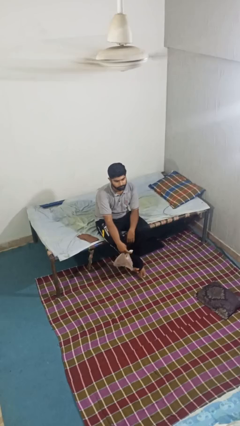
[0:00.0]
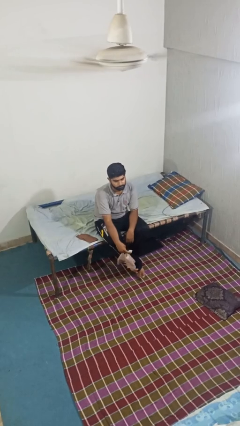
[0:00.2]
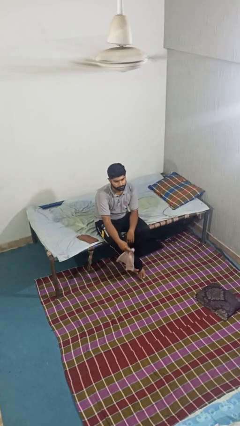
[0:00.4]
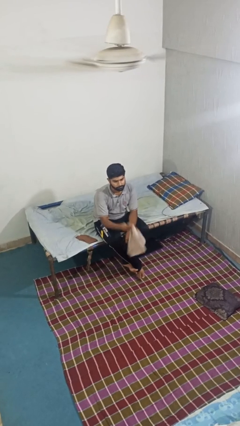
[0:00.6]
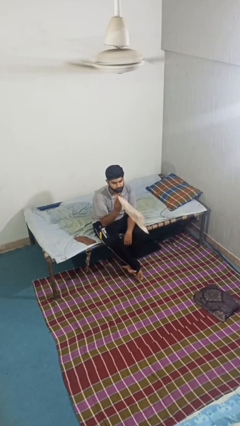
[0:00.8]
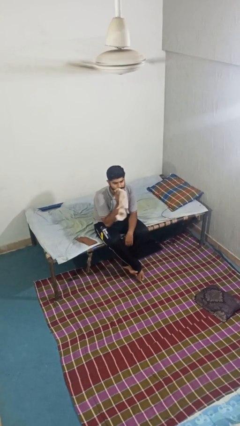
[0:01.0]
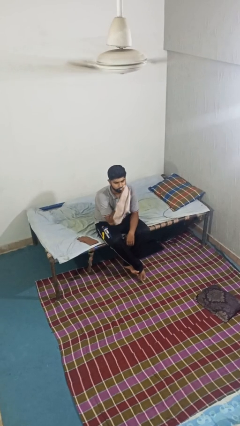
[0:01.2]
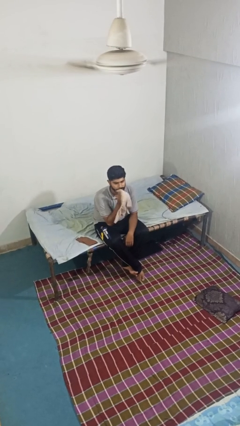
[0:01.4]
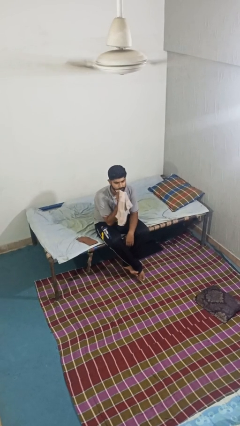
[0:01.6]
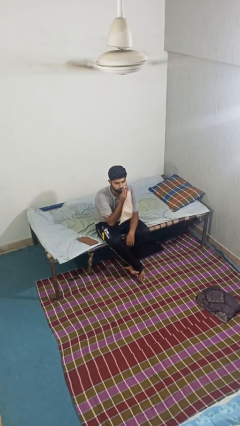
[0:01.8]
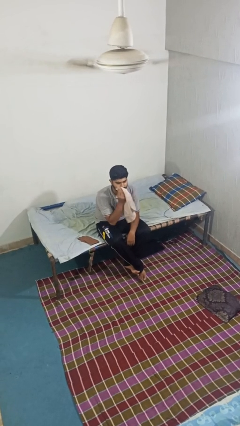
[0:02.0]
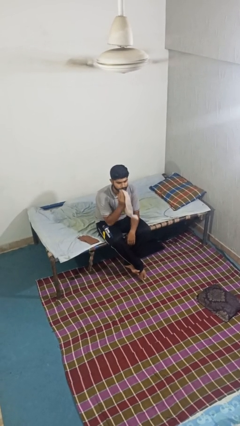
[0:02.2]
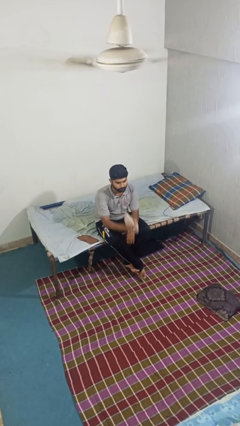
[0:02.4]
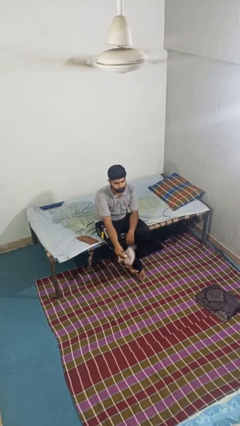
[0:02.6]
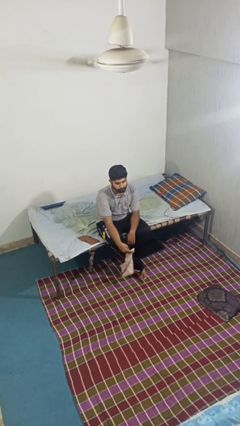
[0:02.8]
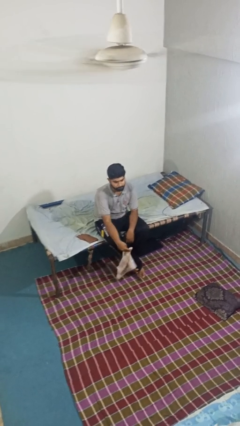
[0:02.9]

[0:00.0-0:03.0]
person wipes mouth with napkin

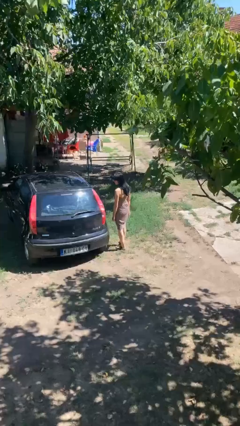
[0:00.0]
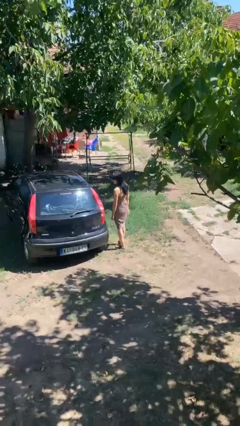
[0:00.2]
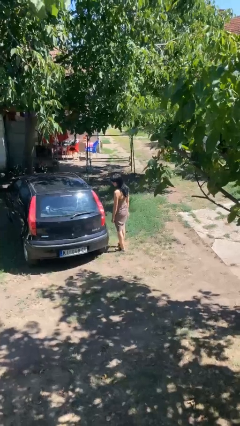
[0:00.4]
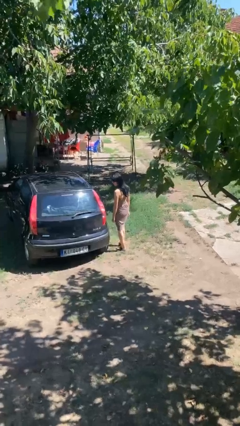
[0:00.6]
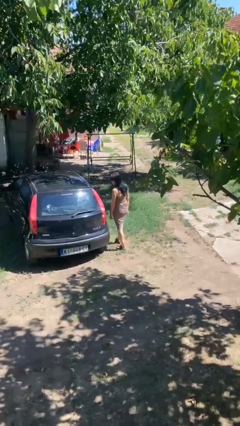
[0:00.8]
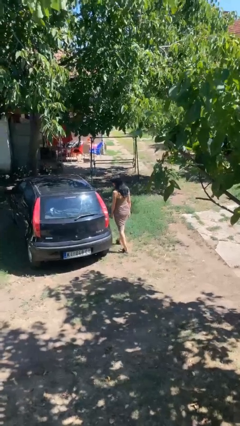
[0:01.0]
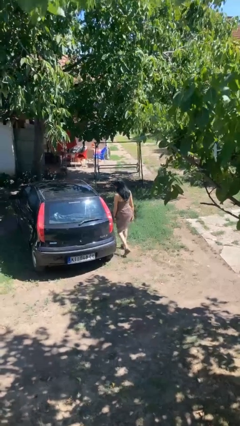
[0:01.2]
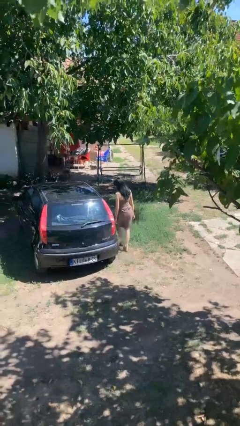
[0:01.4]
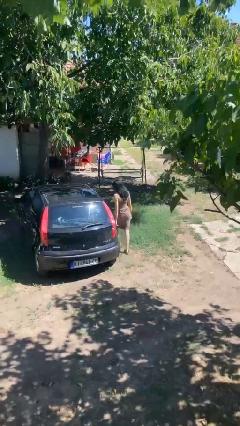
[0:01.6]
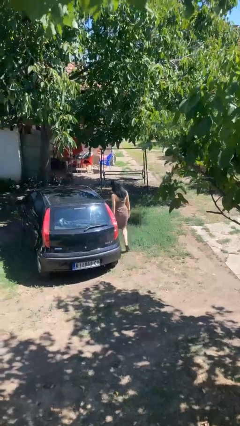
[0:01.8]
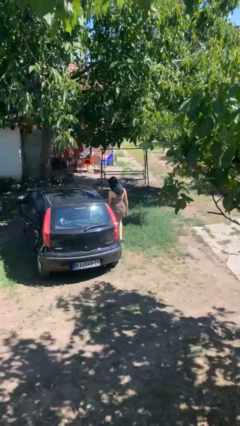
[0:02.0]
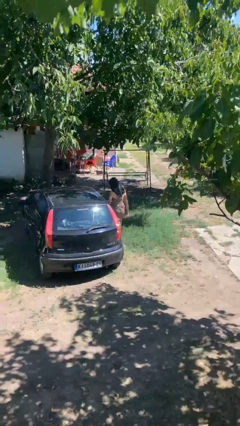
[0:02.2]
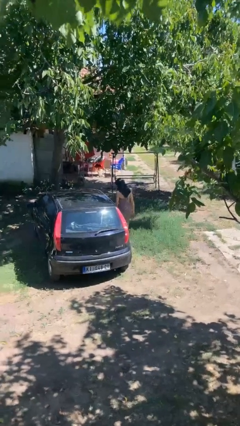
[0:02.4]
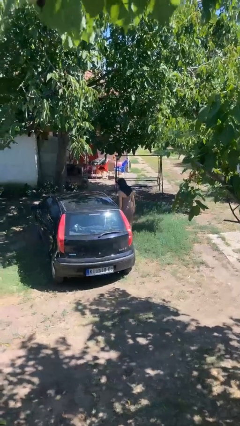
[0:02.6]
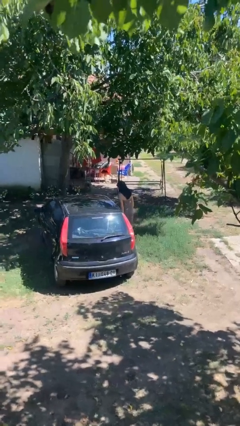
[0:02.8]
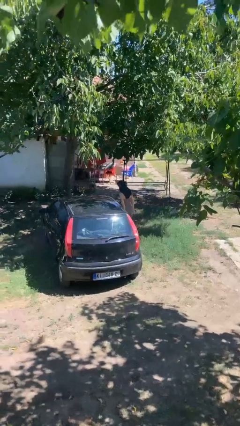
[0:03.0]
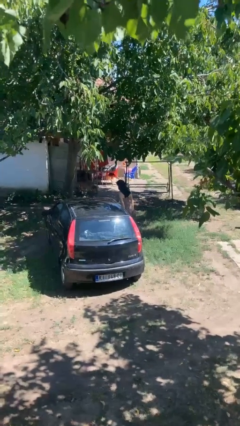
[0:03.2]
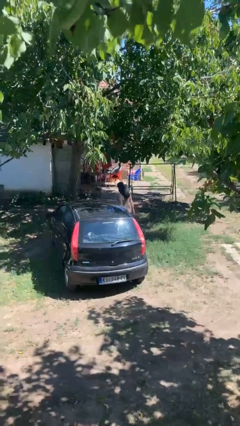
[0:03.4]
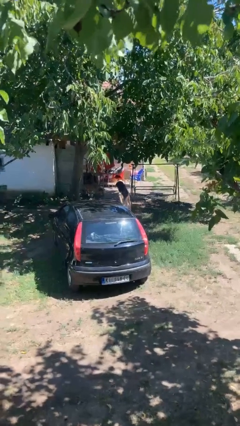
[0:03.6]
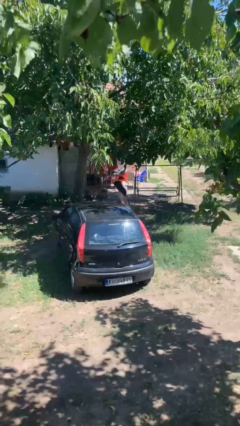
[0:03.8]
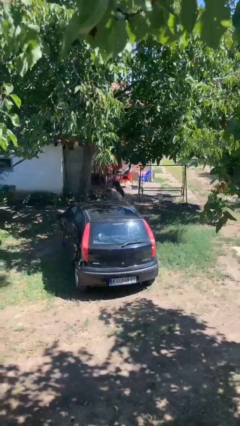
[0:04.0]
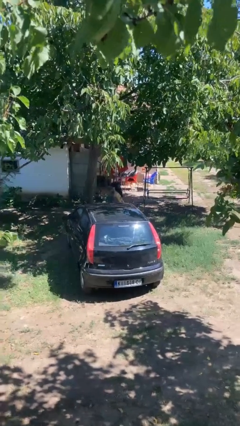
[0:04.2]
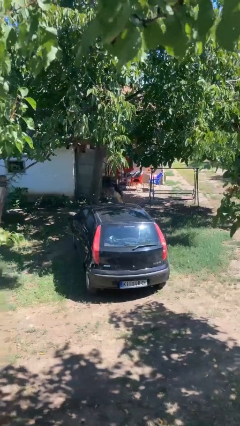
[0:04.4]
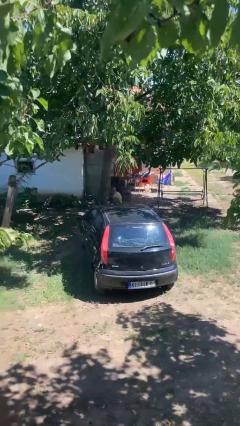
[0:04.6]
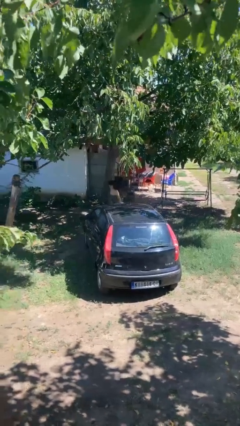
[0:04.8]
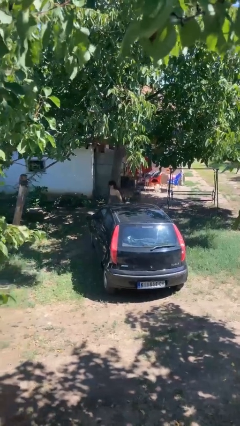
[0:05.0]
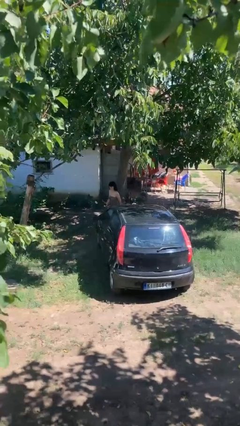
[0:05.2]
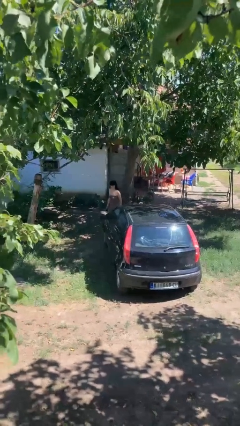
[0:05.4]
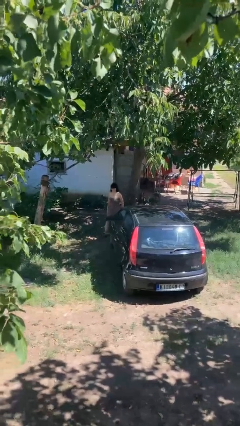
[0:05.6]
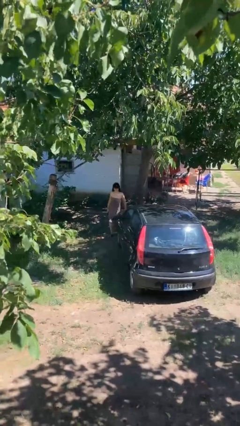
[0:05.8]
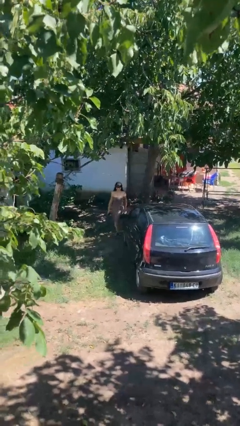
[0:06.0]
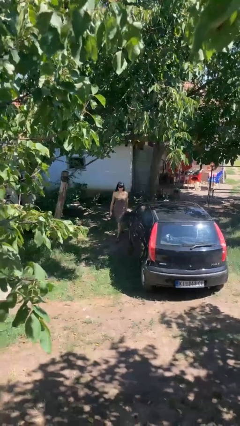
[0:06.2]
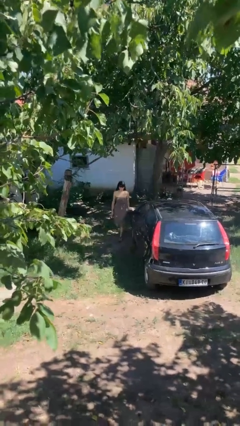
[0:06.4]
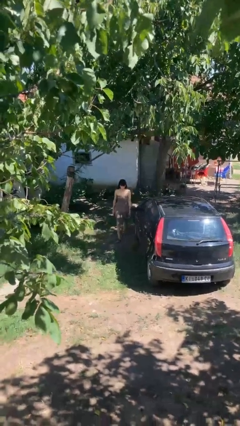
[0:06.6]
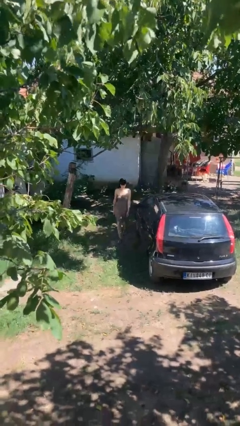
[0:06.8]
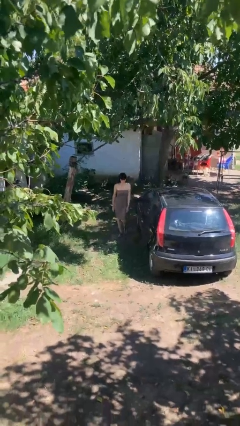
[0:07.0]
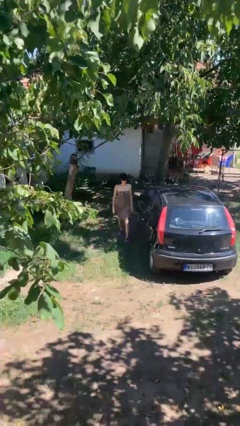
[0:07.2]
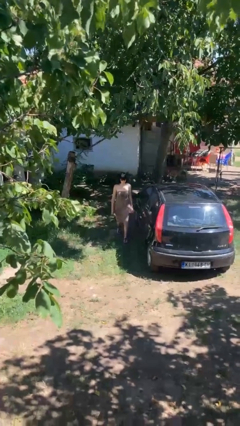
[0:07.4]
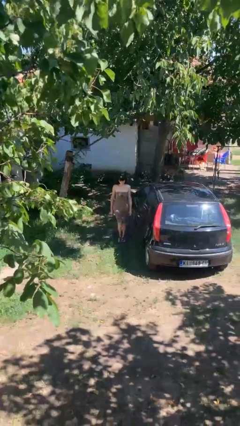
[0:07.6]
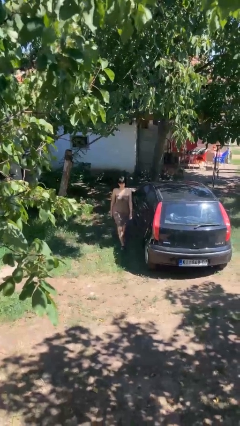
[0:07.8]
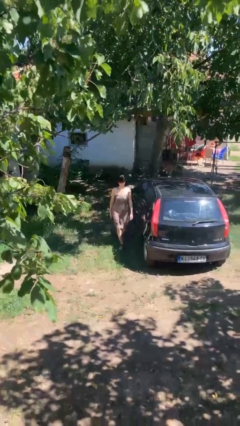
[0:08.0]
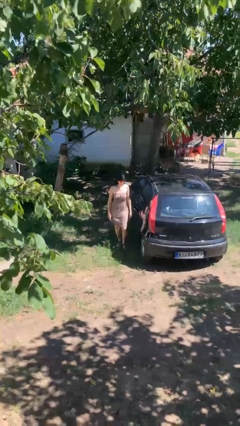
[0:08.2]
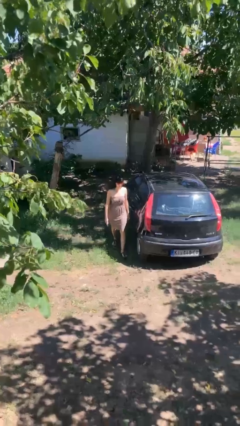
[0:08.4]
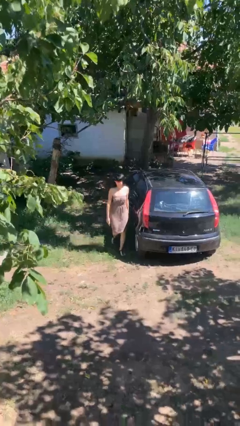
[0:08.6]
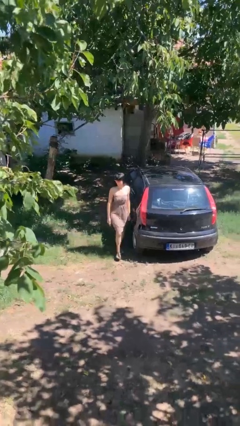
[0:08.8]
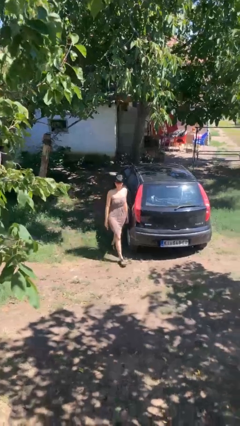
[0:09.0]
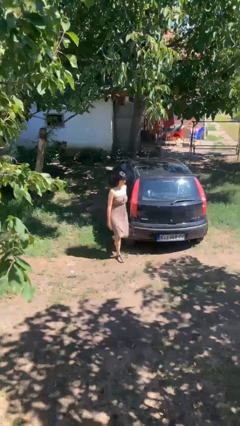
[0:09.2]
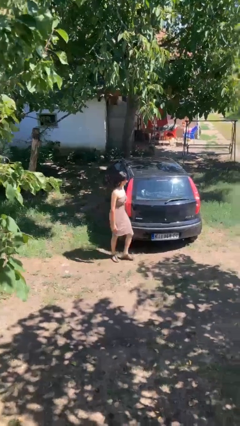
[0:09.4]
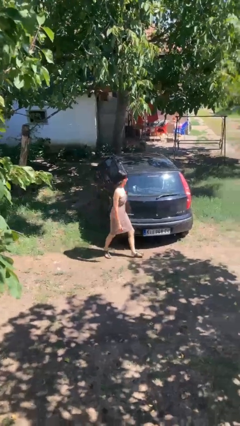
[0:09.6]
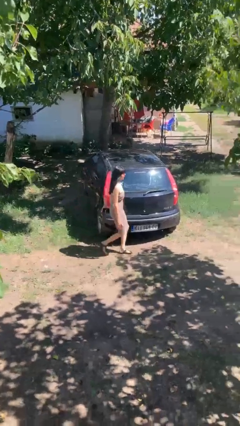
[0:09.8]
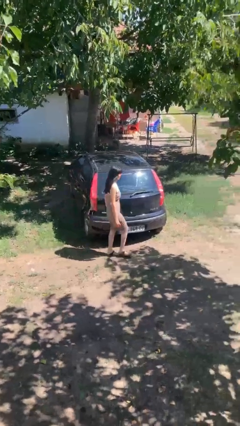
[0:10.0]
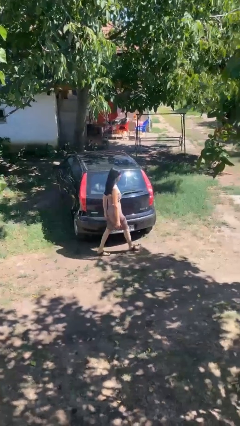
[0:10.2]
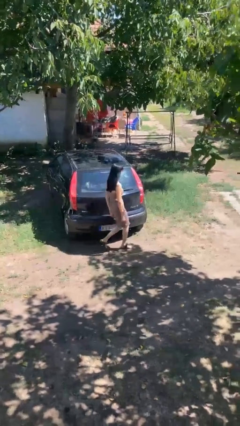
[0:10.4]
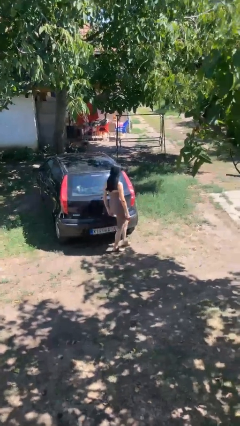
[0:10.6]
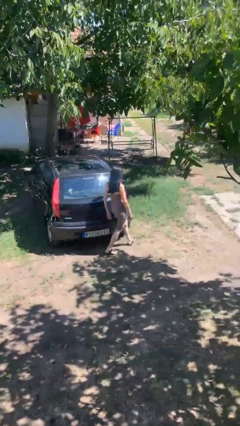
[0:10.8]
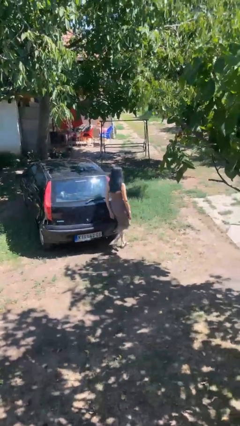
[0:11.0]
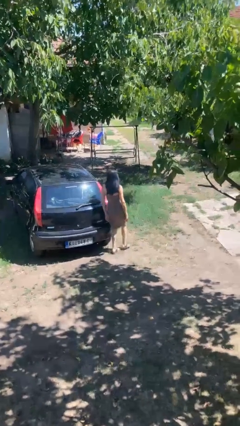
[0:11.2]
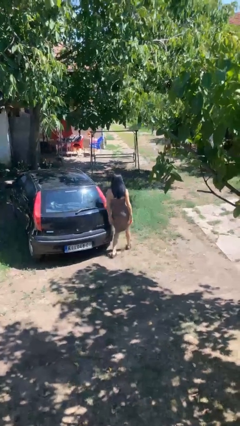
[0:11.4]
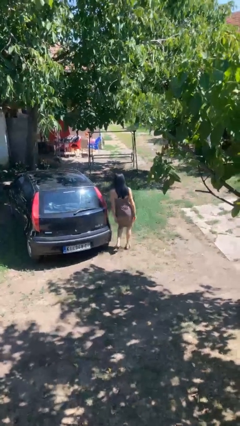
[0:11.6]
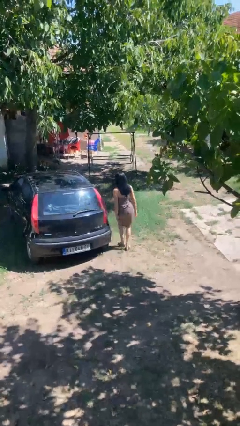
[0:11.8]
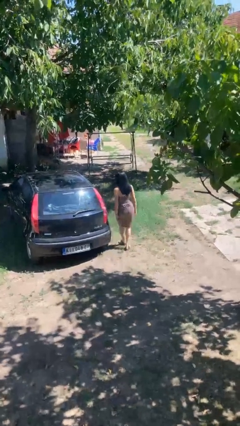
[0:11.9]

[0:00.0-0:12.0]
person walks around car

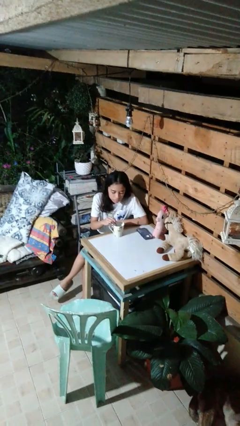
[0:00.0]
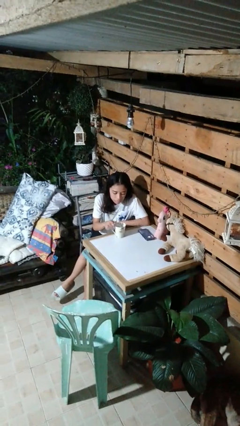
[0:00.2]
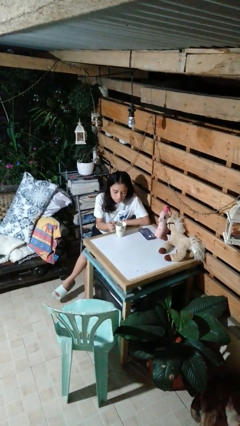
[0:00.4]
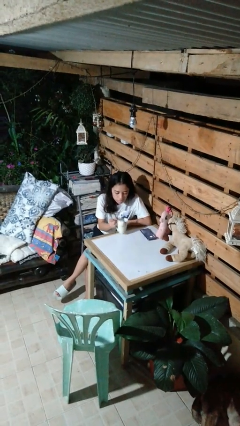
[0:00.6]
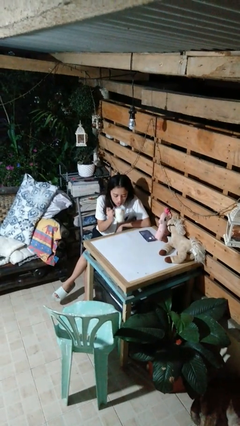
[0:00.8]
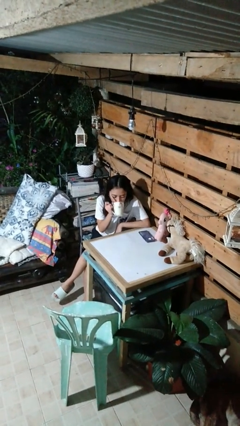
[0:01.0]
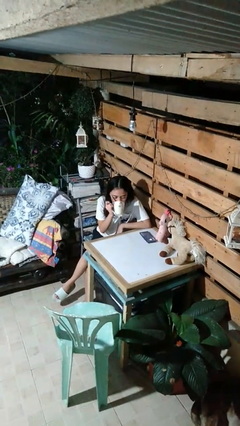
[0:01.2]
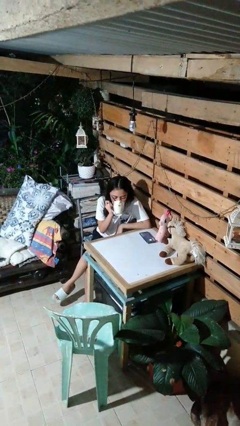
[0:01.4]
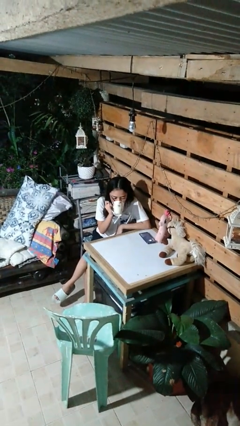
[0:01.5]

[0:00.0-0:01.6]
person drinks from mug

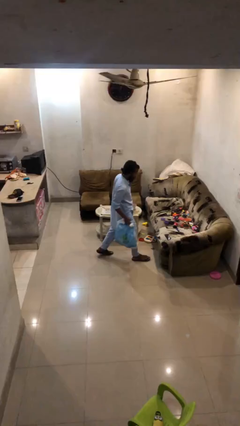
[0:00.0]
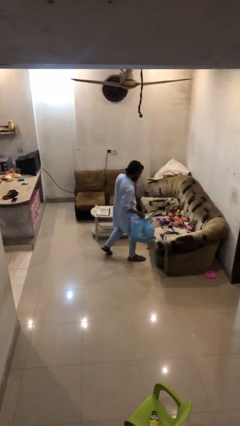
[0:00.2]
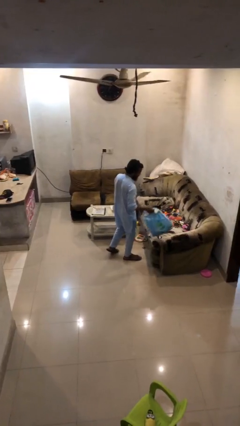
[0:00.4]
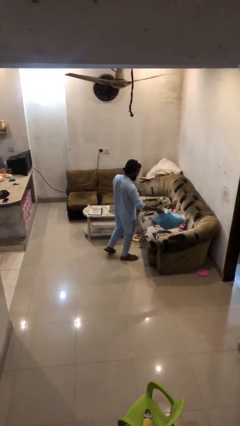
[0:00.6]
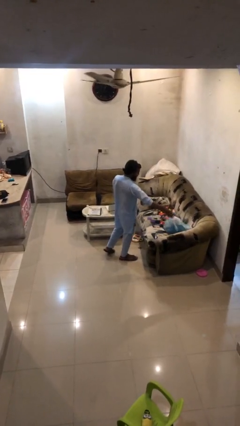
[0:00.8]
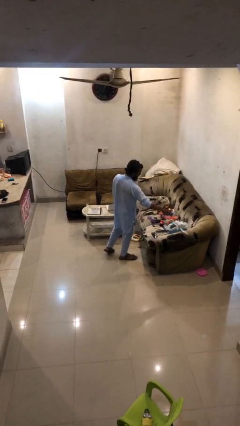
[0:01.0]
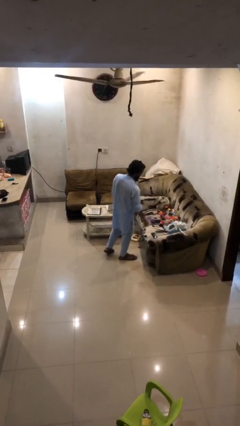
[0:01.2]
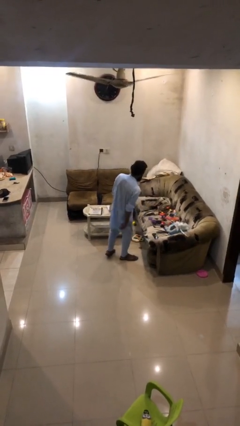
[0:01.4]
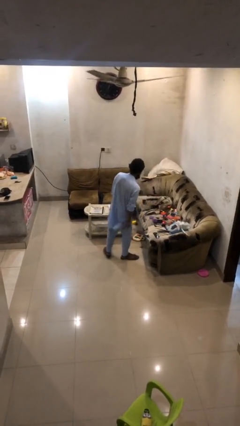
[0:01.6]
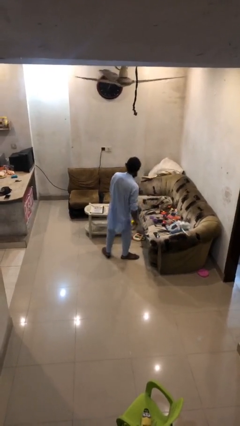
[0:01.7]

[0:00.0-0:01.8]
person puts down object on table
